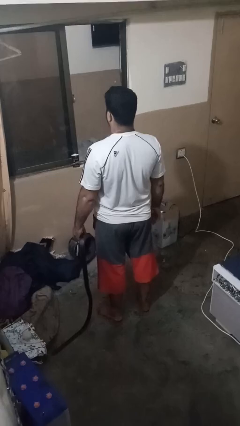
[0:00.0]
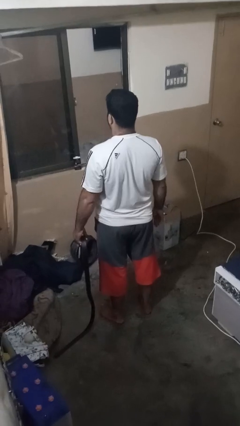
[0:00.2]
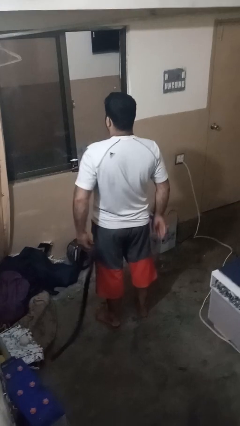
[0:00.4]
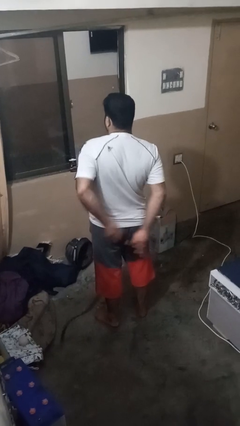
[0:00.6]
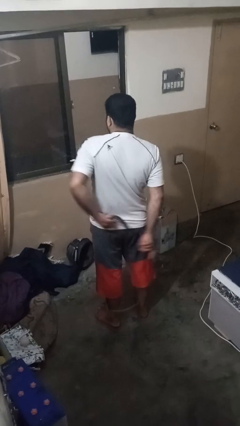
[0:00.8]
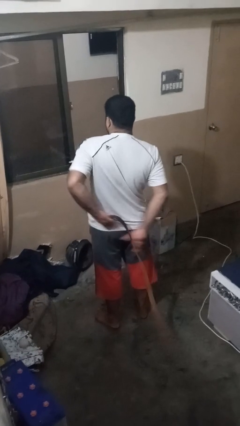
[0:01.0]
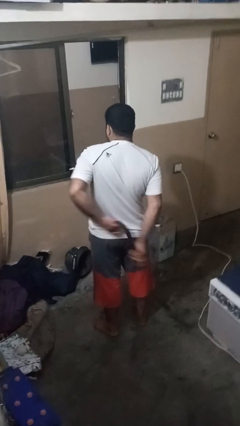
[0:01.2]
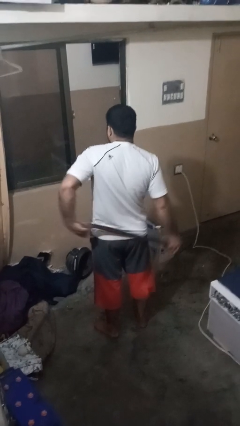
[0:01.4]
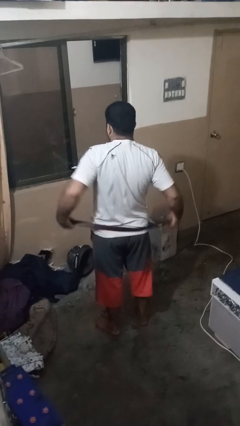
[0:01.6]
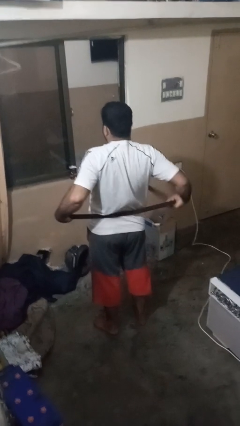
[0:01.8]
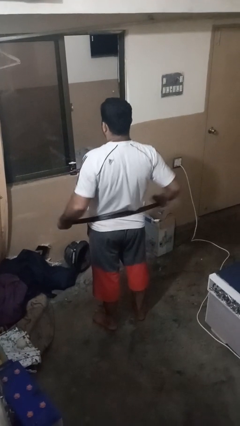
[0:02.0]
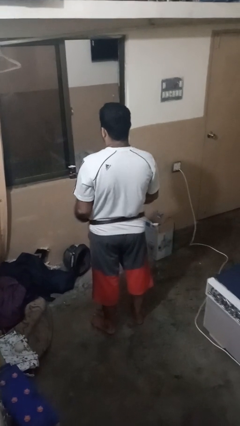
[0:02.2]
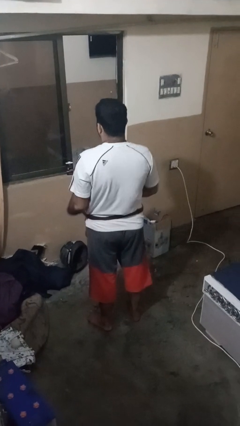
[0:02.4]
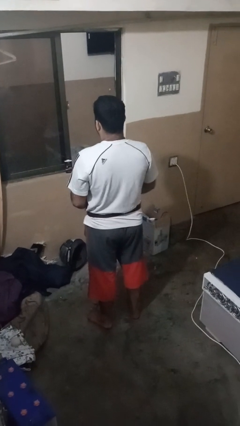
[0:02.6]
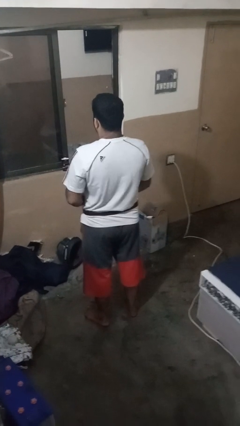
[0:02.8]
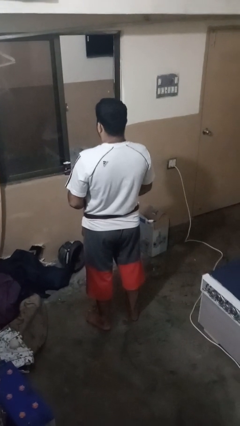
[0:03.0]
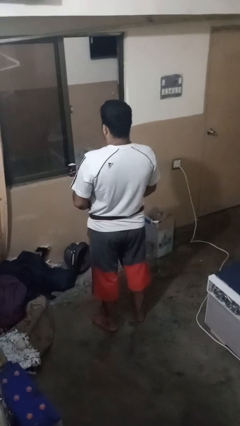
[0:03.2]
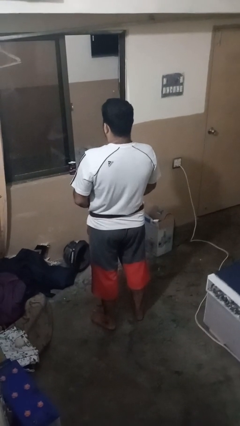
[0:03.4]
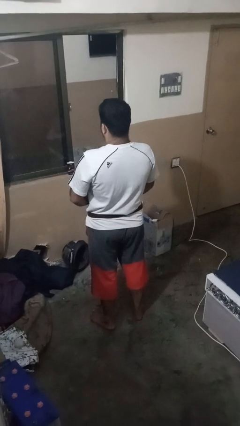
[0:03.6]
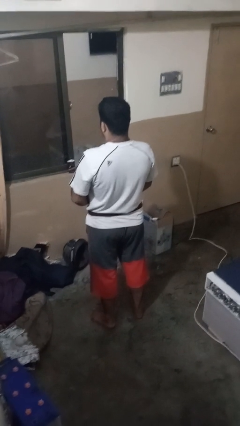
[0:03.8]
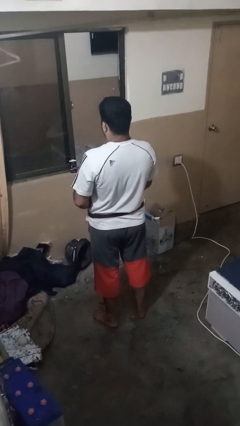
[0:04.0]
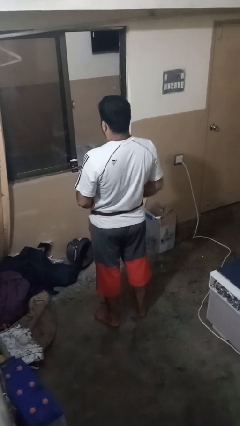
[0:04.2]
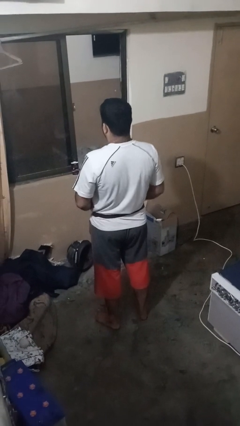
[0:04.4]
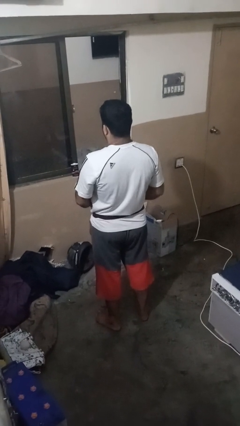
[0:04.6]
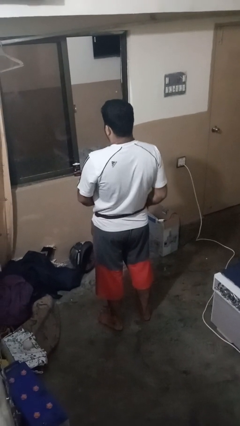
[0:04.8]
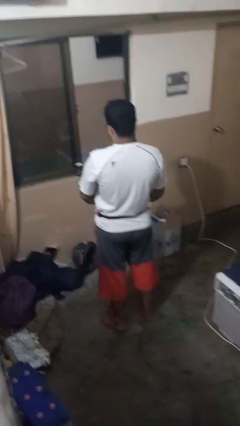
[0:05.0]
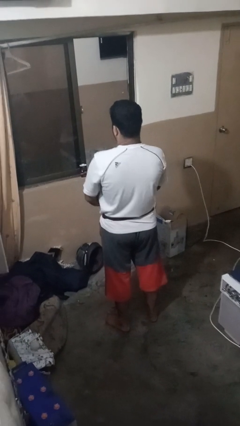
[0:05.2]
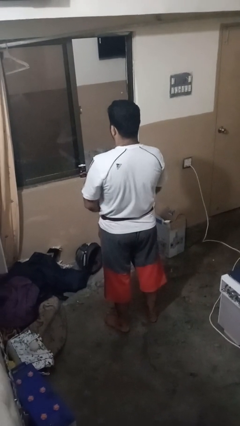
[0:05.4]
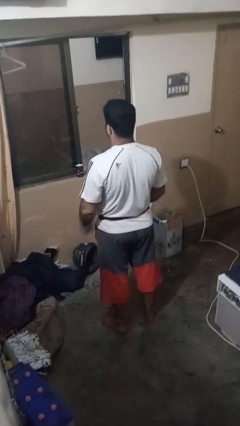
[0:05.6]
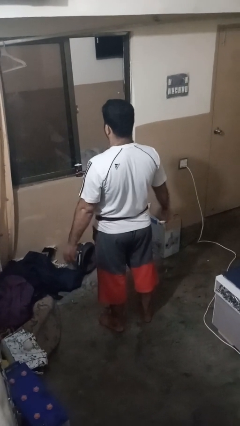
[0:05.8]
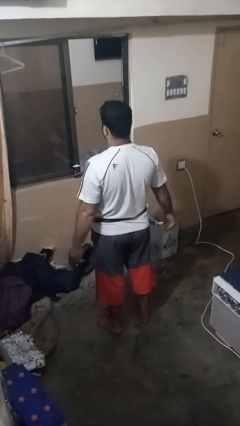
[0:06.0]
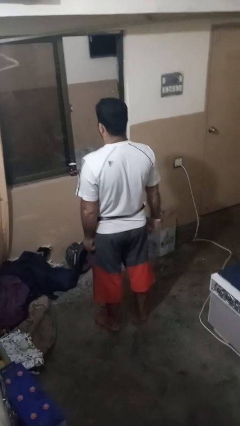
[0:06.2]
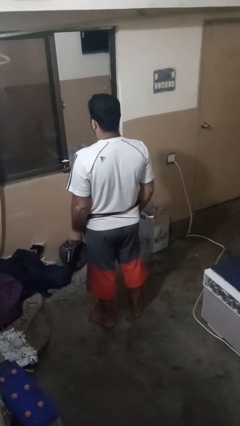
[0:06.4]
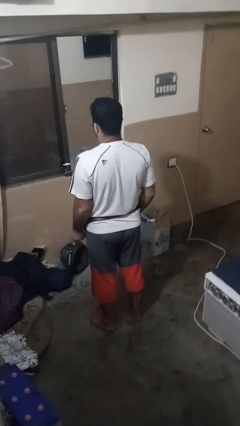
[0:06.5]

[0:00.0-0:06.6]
person puts on belt

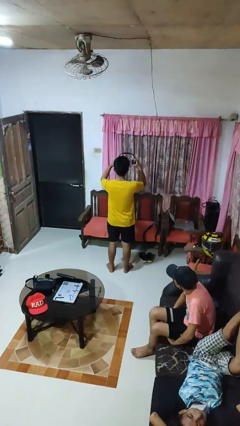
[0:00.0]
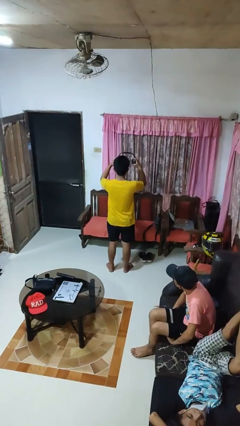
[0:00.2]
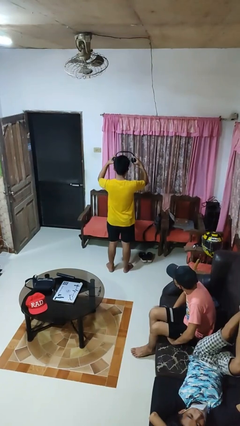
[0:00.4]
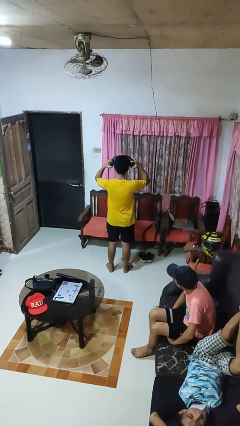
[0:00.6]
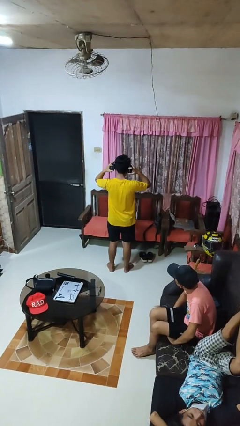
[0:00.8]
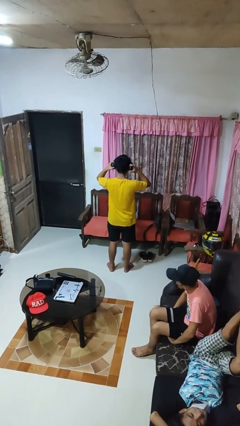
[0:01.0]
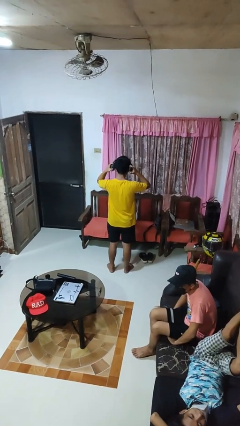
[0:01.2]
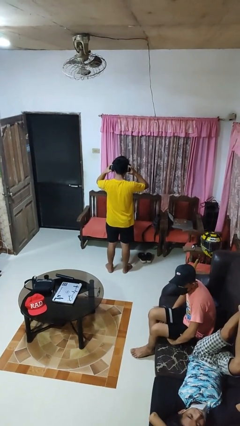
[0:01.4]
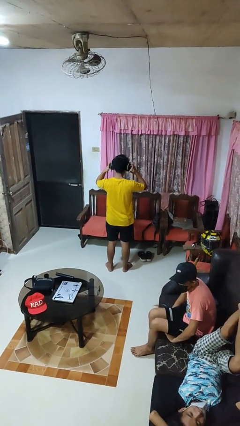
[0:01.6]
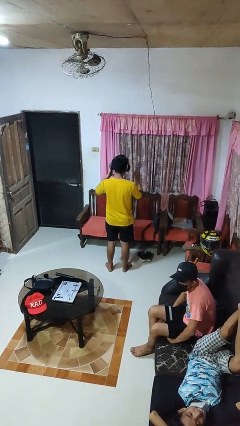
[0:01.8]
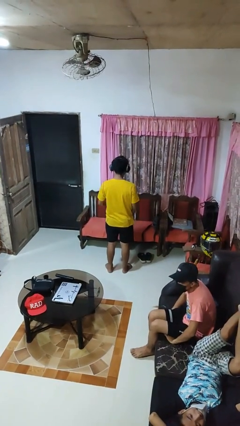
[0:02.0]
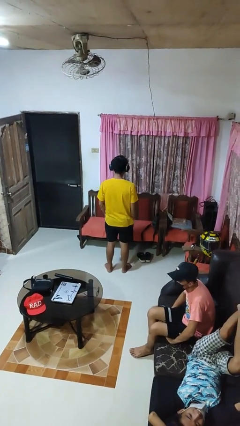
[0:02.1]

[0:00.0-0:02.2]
person puts on headphones

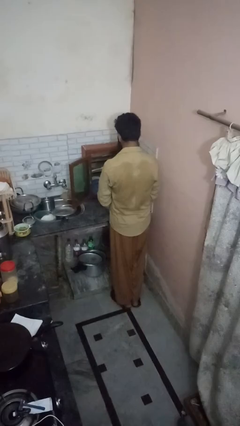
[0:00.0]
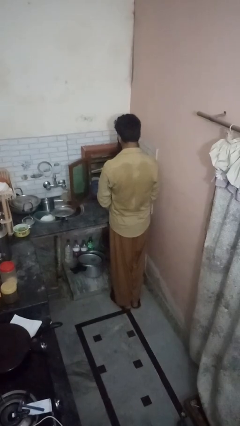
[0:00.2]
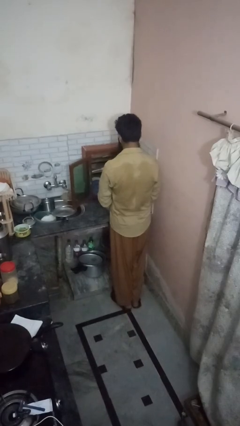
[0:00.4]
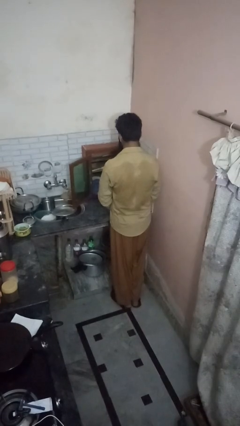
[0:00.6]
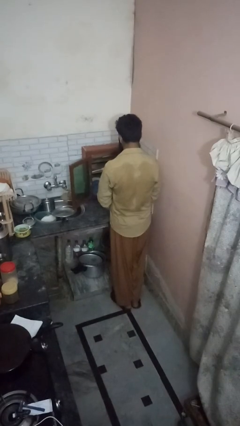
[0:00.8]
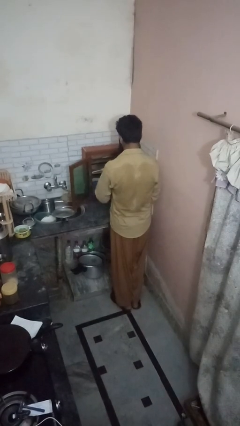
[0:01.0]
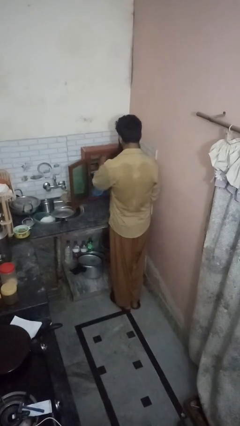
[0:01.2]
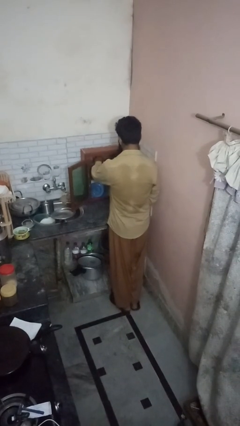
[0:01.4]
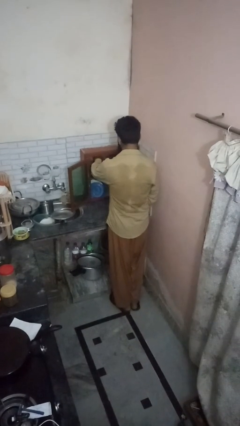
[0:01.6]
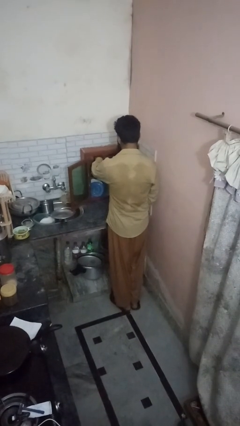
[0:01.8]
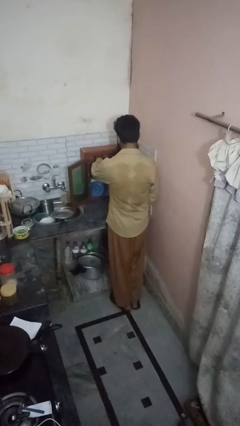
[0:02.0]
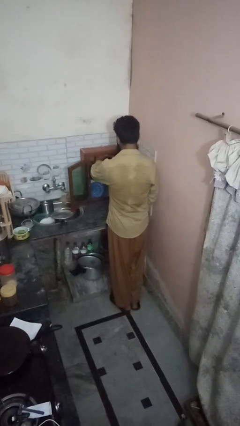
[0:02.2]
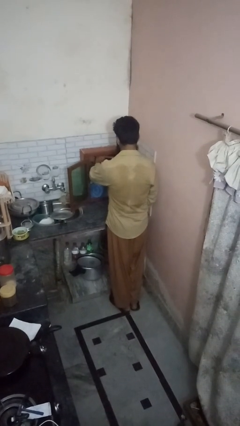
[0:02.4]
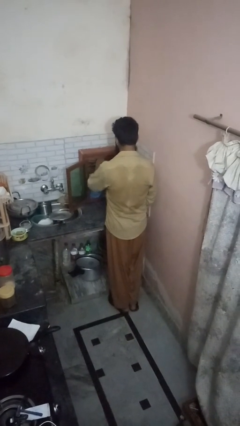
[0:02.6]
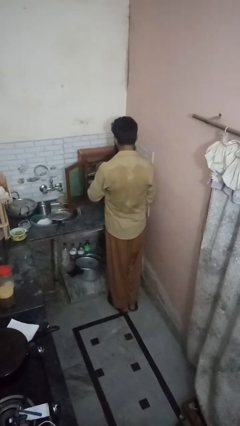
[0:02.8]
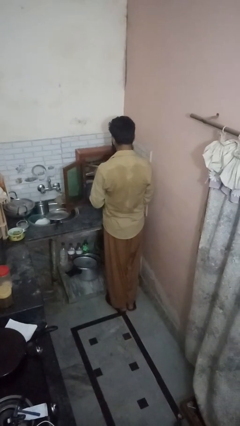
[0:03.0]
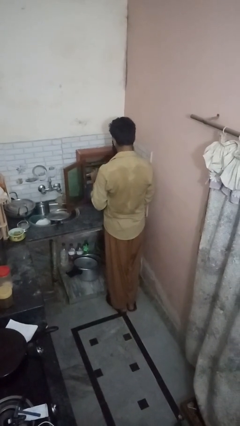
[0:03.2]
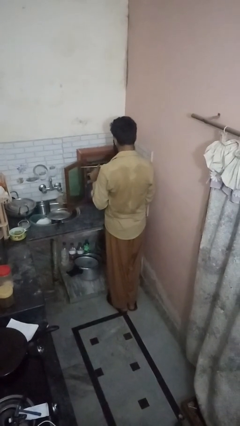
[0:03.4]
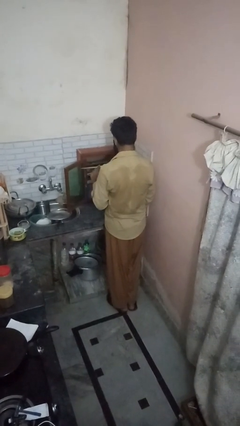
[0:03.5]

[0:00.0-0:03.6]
person puts object in cabinet

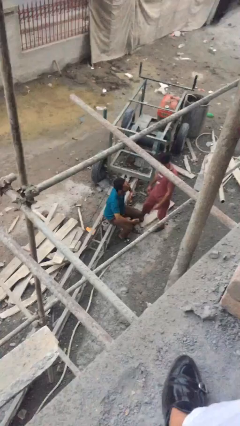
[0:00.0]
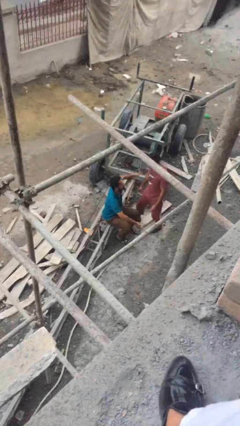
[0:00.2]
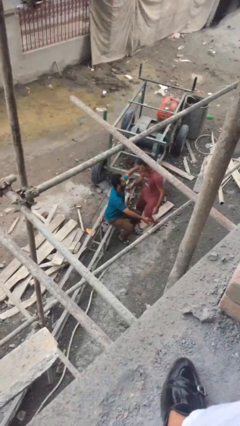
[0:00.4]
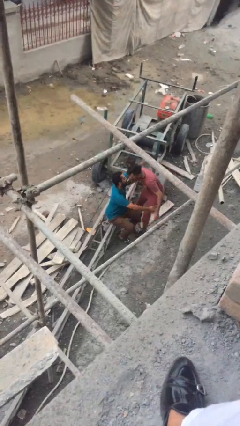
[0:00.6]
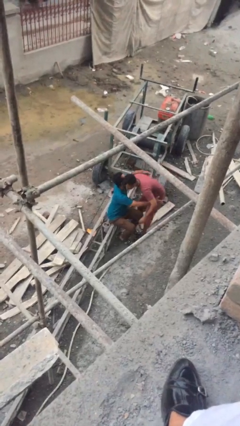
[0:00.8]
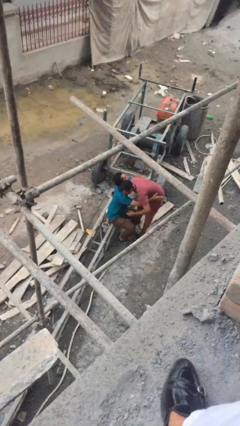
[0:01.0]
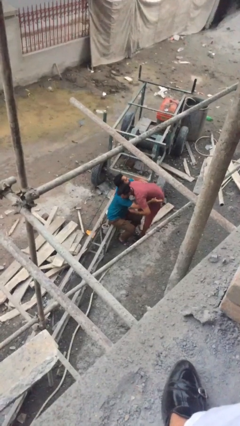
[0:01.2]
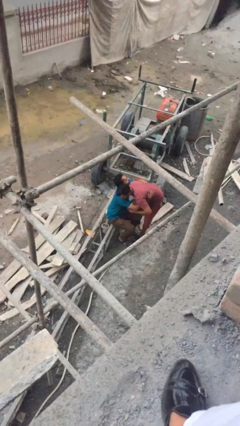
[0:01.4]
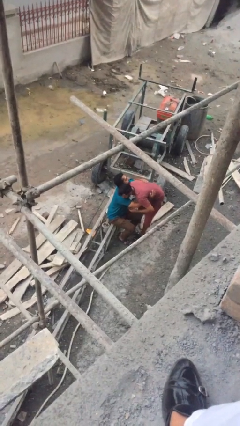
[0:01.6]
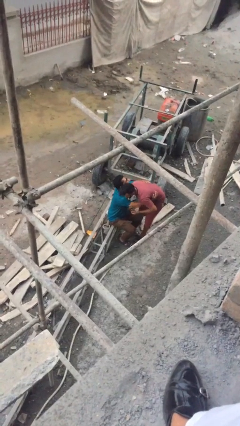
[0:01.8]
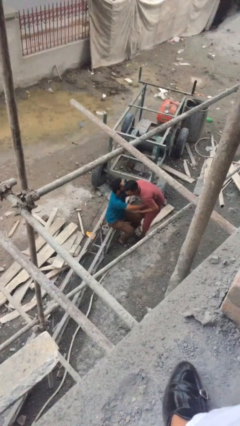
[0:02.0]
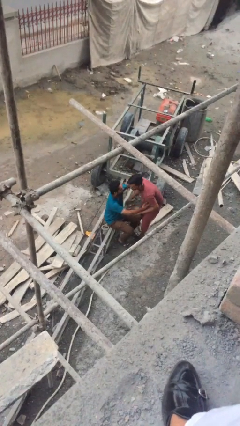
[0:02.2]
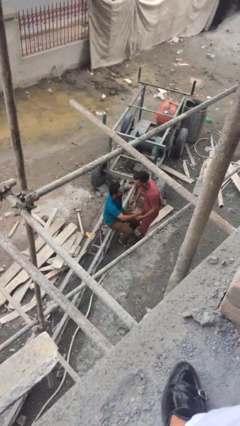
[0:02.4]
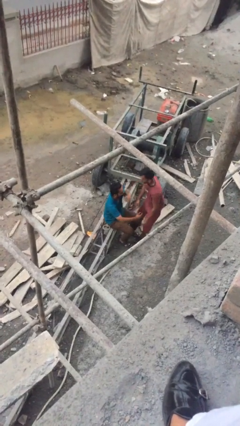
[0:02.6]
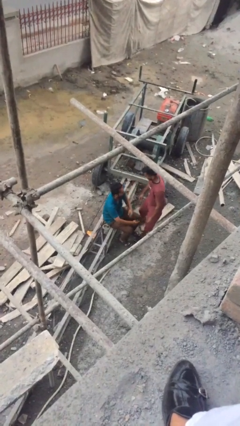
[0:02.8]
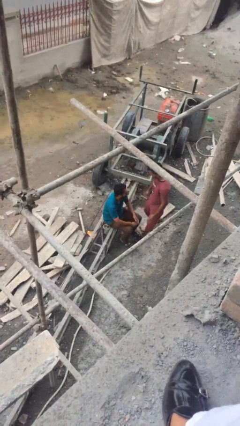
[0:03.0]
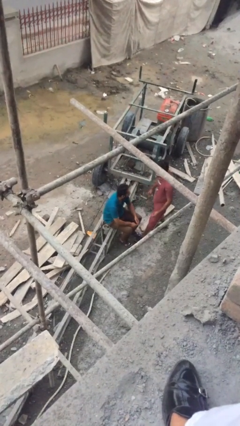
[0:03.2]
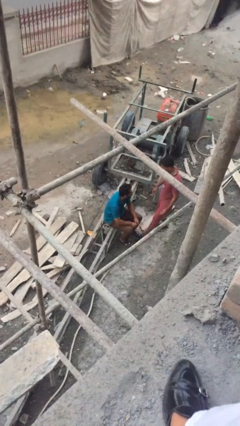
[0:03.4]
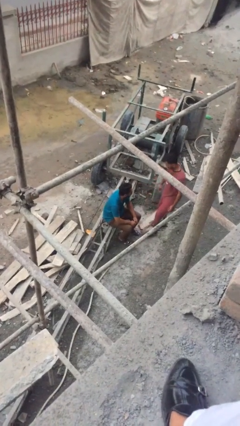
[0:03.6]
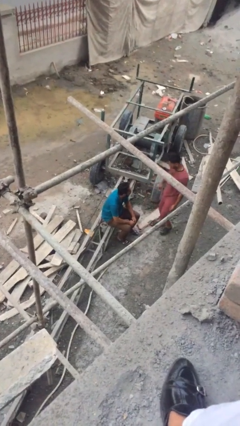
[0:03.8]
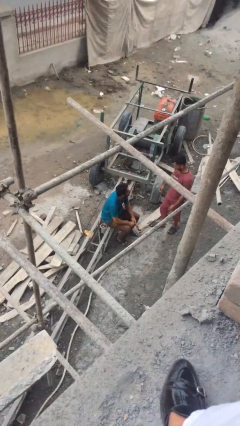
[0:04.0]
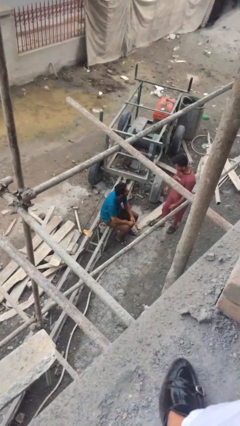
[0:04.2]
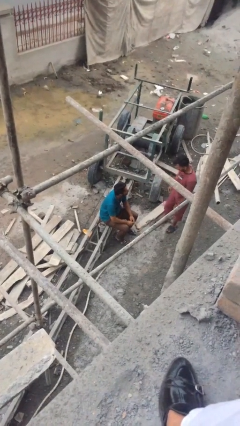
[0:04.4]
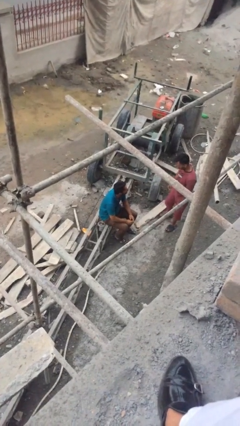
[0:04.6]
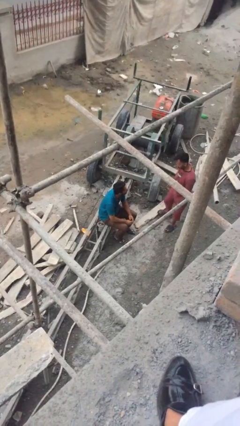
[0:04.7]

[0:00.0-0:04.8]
person embraces person

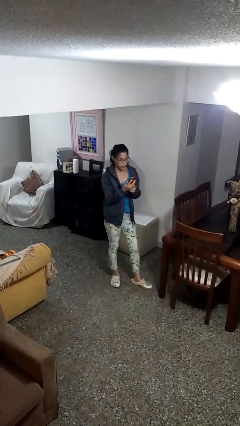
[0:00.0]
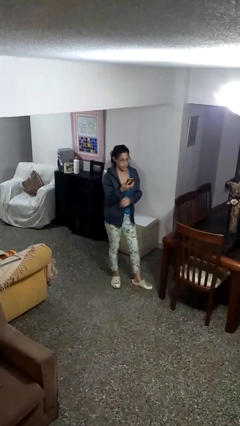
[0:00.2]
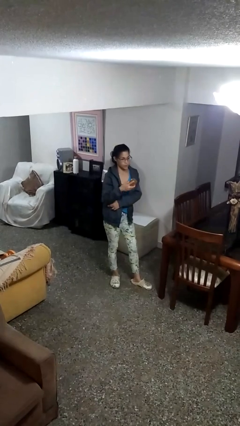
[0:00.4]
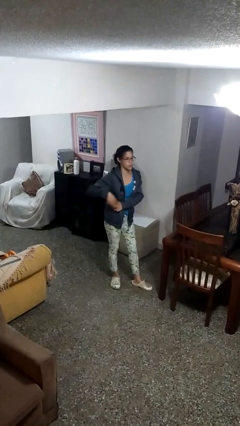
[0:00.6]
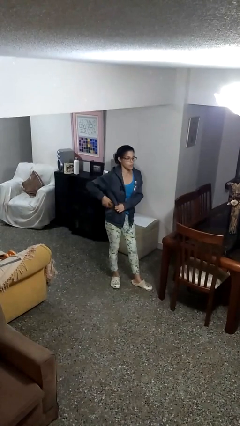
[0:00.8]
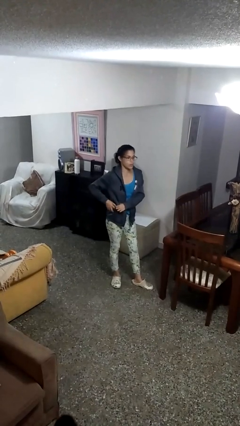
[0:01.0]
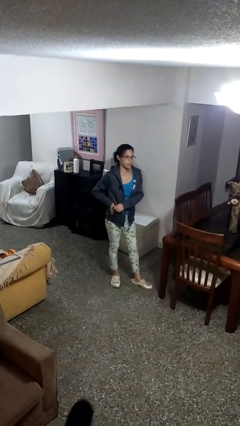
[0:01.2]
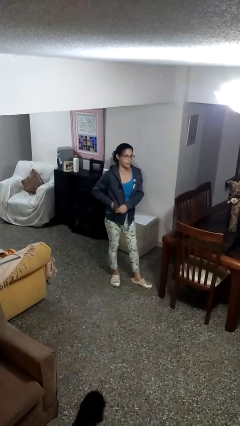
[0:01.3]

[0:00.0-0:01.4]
person puts phone into pocket
